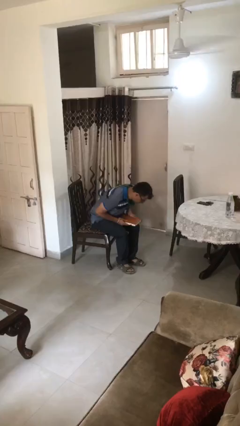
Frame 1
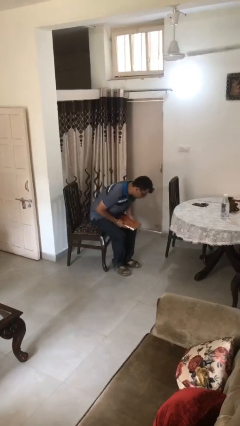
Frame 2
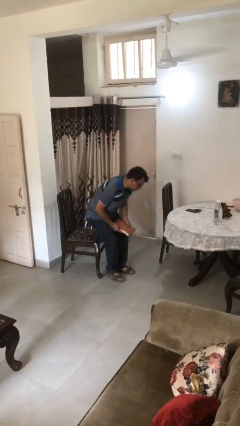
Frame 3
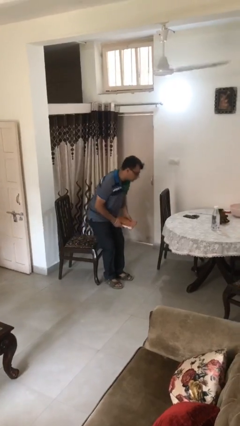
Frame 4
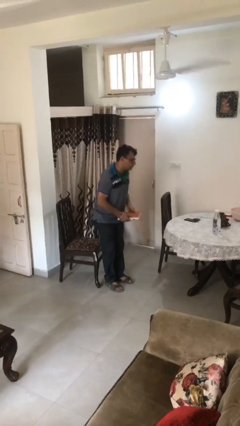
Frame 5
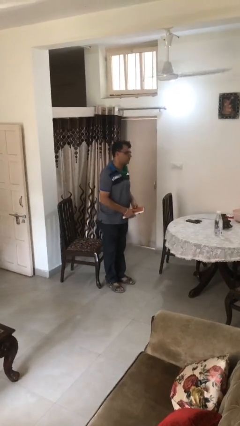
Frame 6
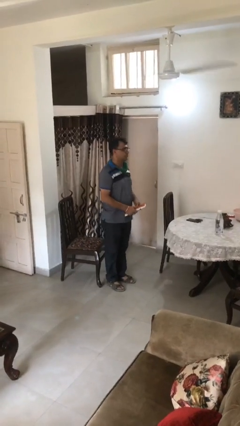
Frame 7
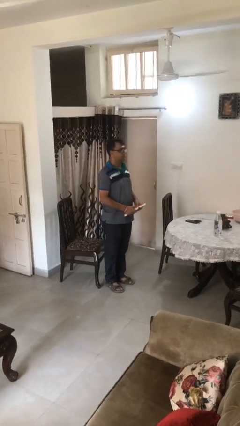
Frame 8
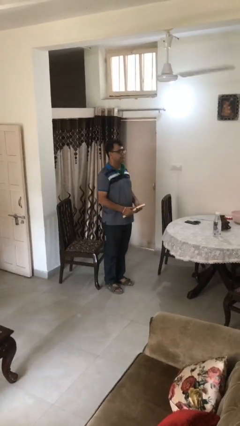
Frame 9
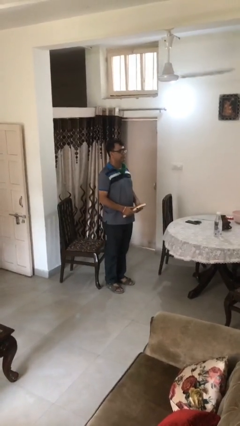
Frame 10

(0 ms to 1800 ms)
person stands up

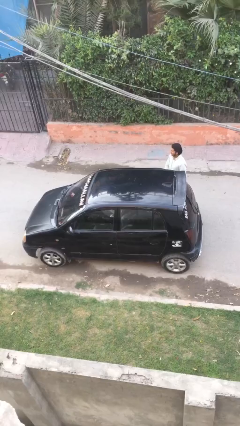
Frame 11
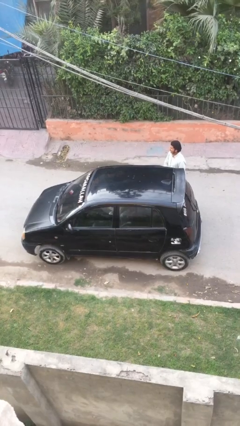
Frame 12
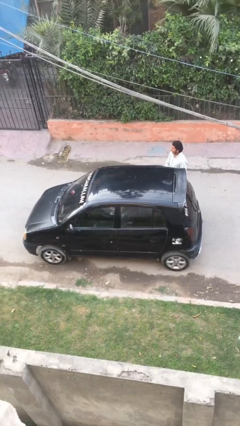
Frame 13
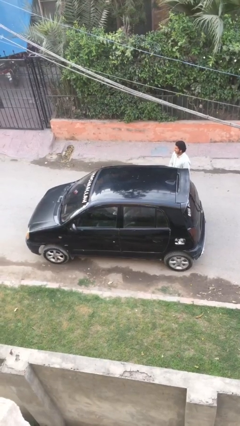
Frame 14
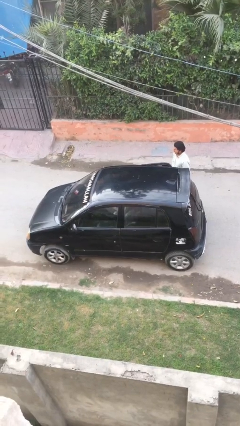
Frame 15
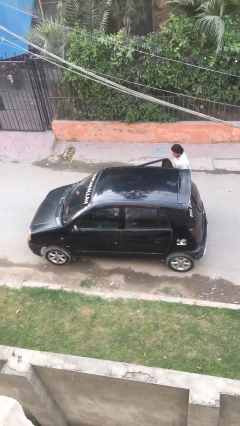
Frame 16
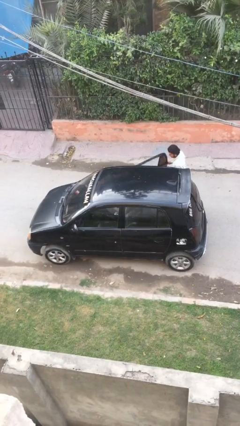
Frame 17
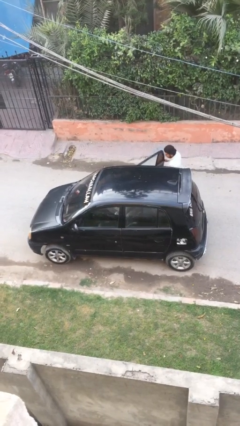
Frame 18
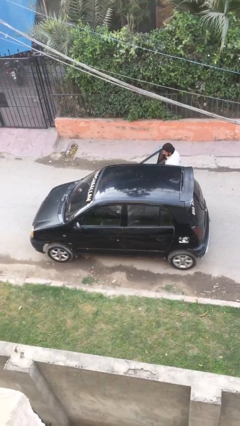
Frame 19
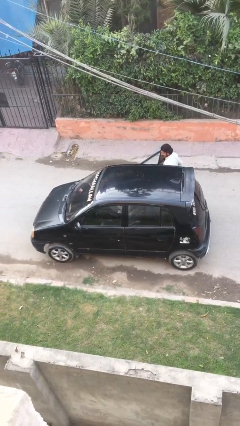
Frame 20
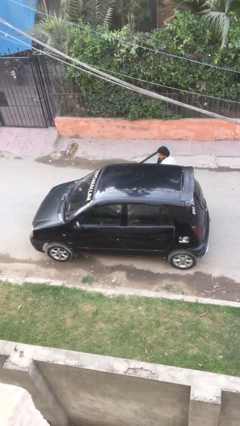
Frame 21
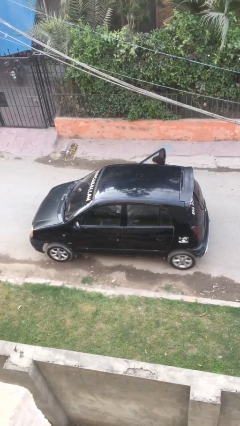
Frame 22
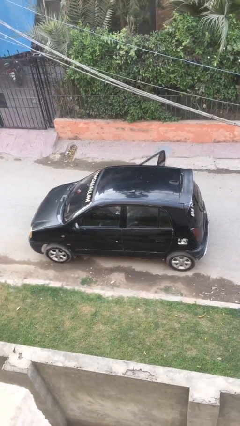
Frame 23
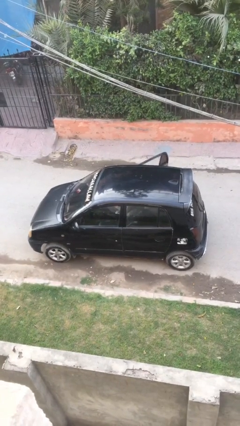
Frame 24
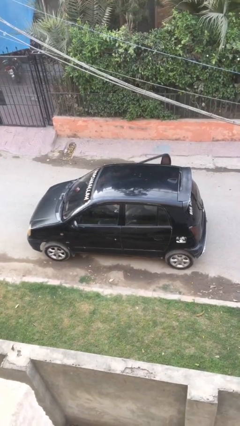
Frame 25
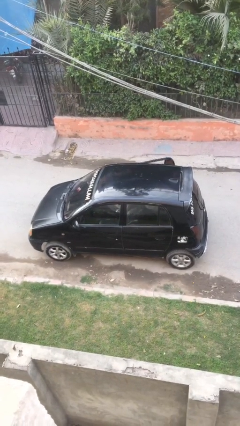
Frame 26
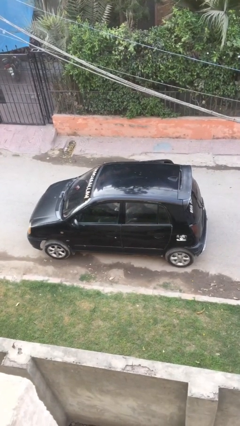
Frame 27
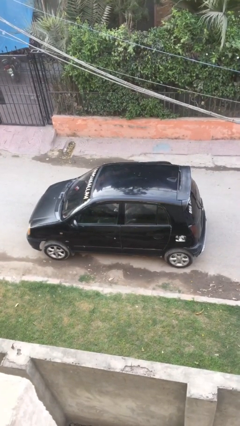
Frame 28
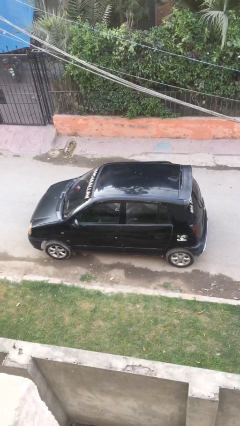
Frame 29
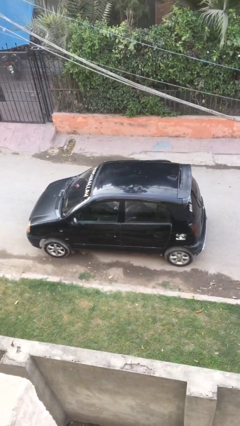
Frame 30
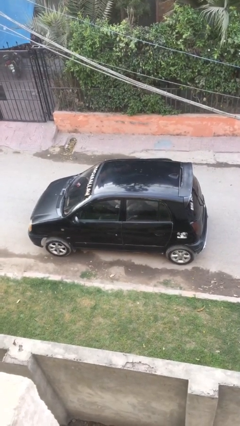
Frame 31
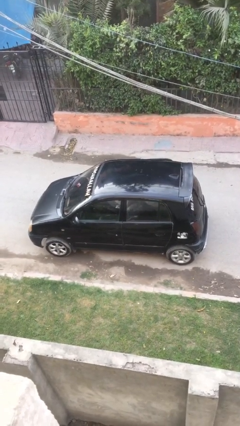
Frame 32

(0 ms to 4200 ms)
car picks up person

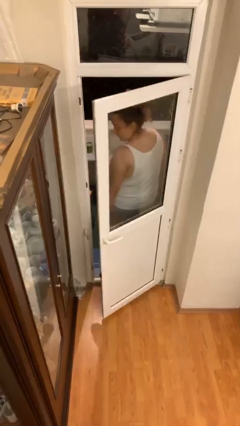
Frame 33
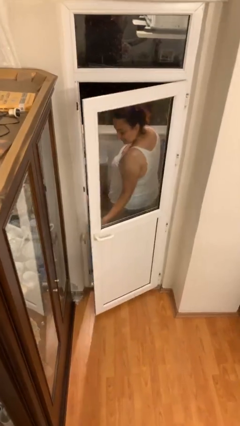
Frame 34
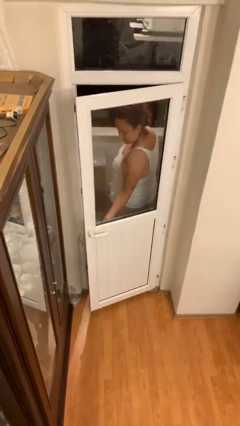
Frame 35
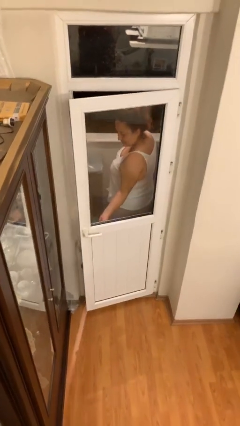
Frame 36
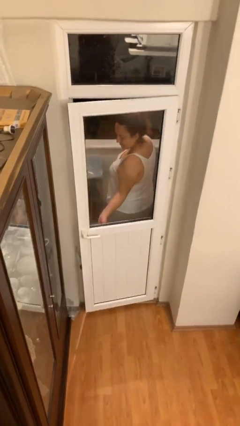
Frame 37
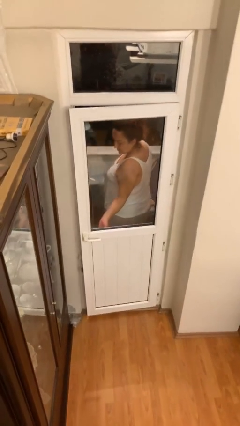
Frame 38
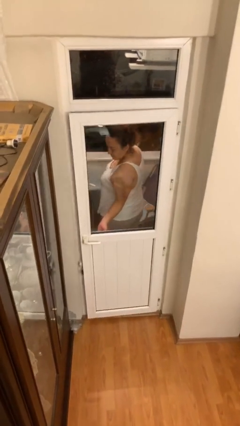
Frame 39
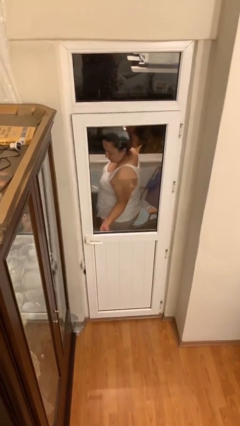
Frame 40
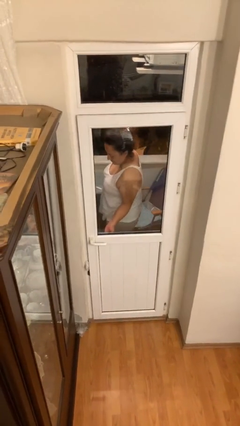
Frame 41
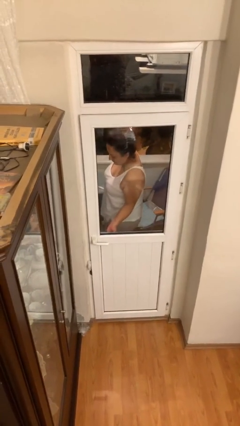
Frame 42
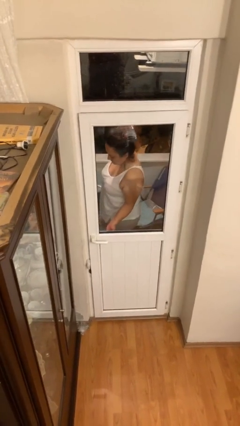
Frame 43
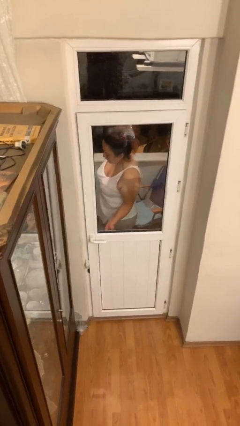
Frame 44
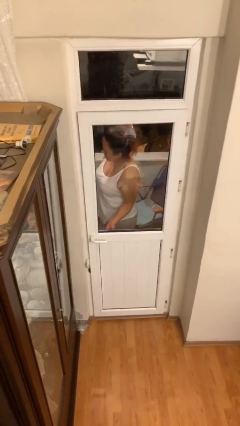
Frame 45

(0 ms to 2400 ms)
person closes facility door

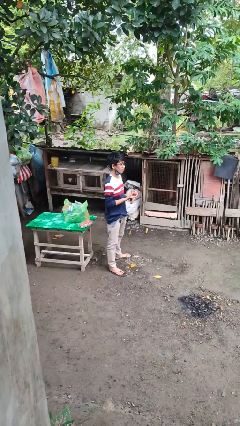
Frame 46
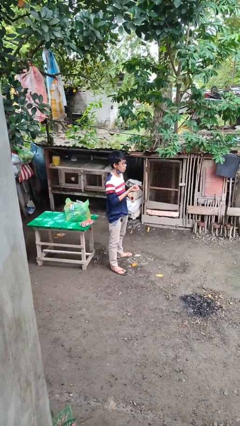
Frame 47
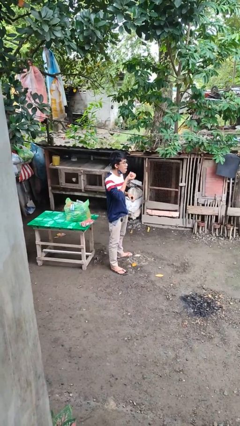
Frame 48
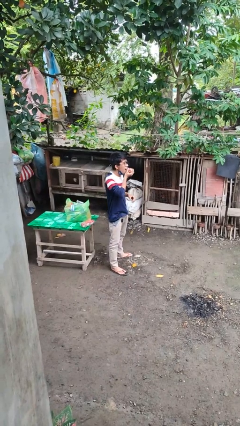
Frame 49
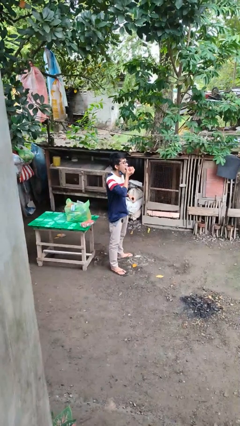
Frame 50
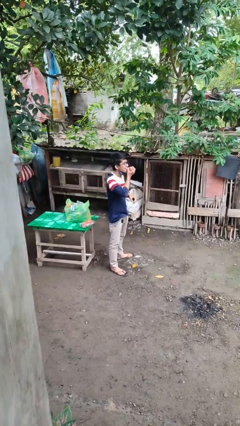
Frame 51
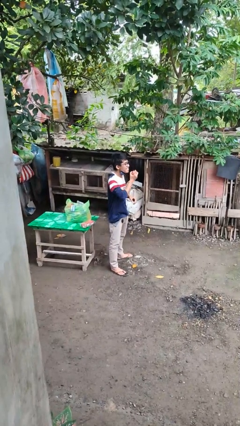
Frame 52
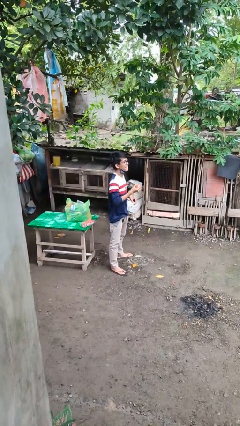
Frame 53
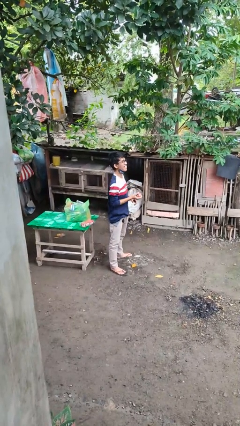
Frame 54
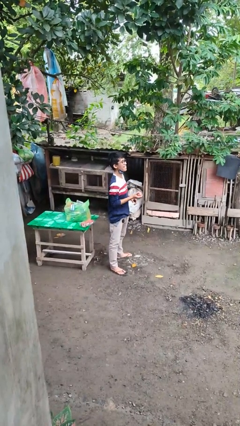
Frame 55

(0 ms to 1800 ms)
person eats apple

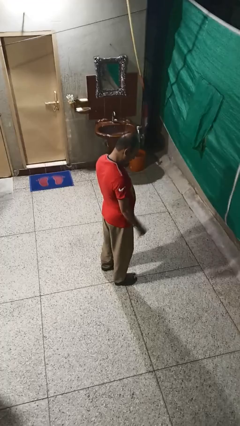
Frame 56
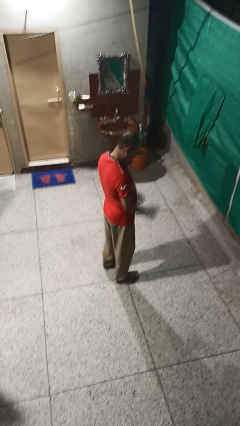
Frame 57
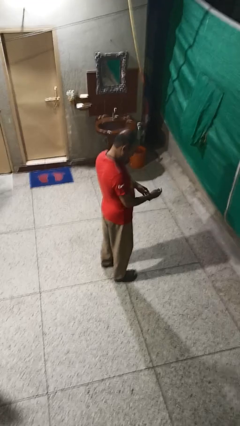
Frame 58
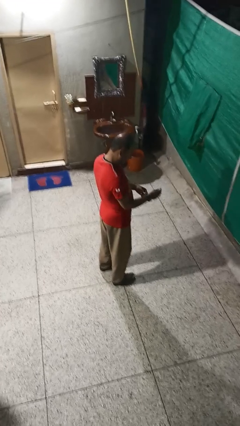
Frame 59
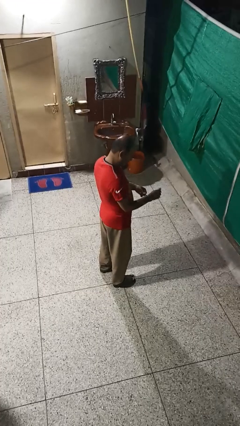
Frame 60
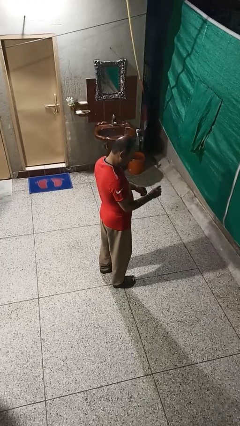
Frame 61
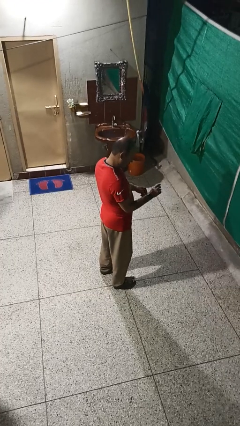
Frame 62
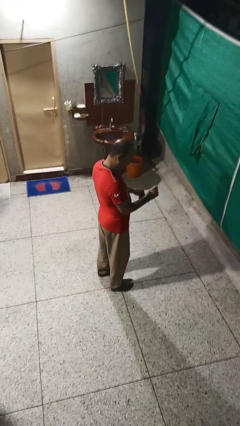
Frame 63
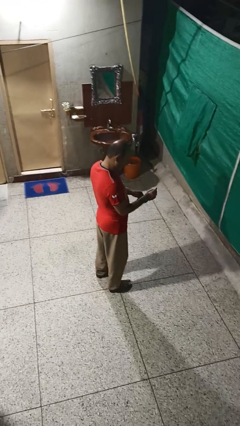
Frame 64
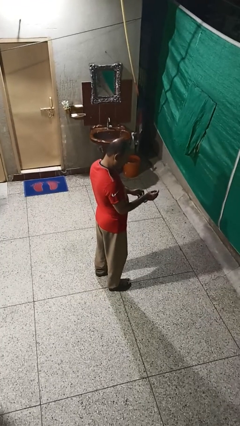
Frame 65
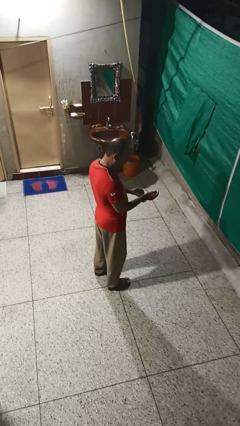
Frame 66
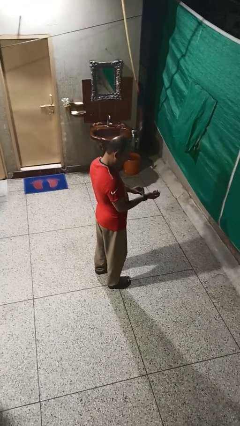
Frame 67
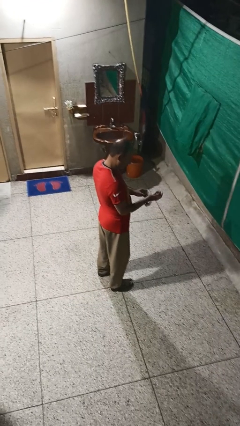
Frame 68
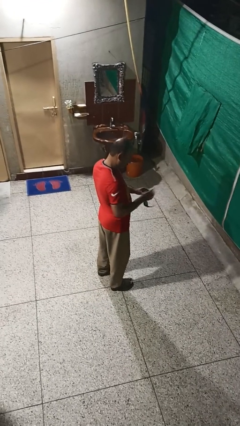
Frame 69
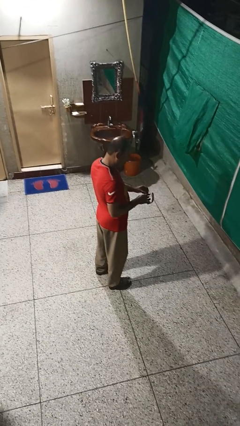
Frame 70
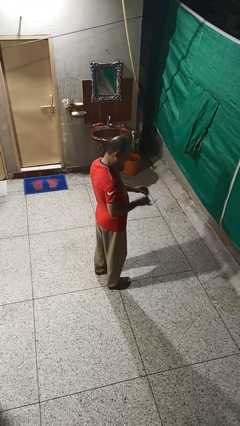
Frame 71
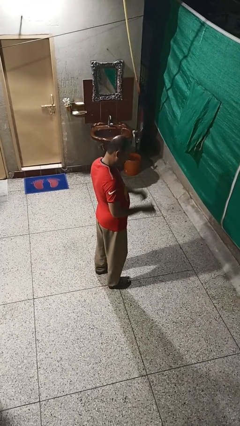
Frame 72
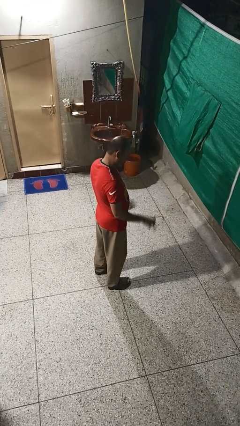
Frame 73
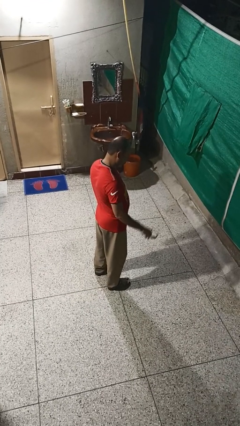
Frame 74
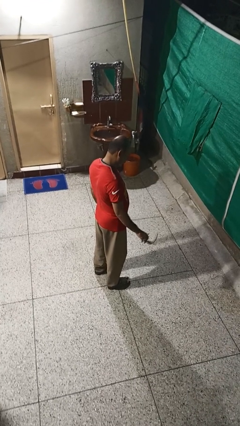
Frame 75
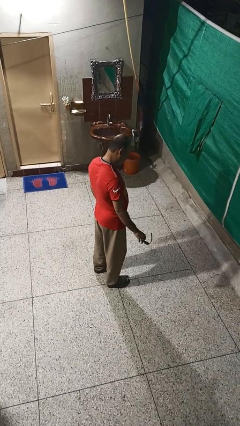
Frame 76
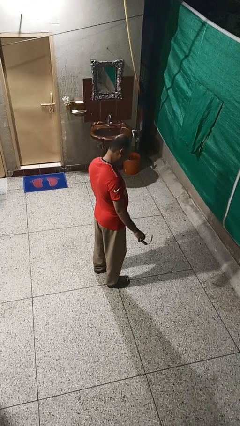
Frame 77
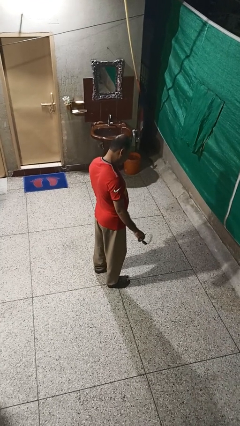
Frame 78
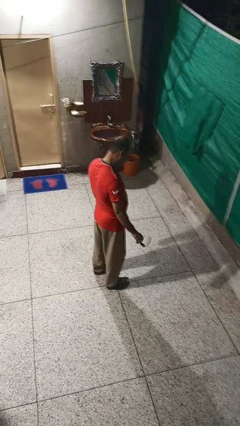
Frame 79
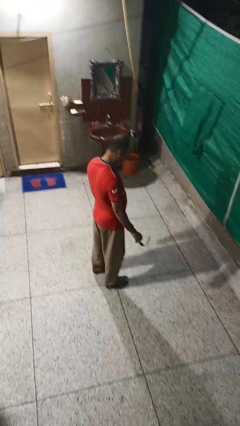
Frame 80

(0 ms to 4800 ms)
person takes off wristwatch

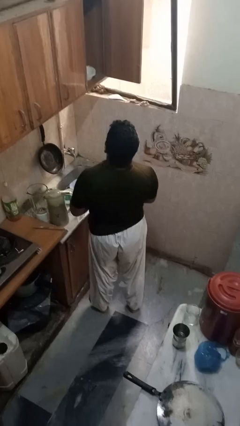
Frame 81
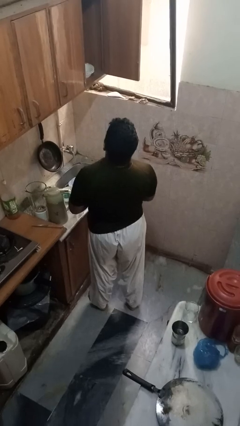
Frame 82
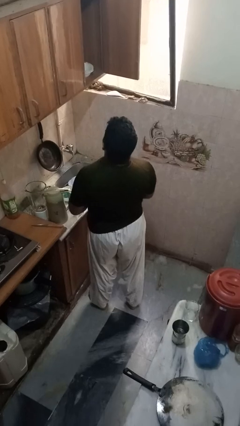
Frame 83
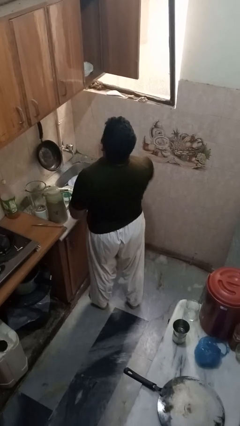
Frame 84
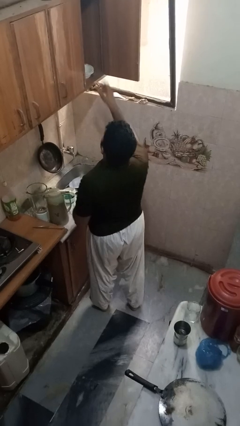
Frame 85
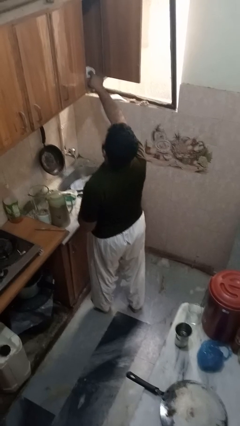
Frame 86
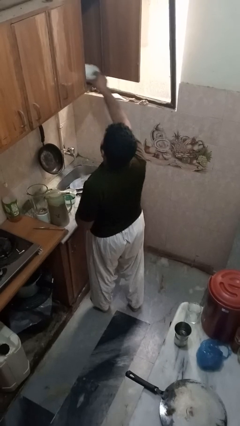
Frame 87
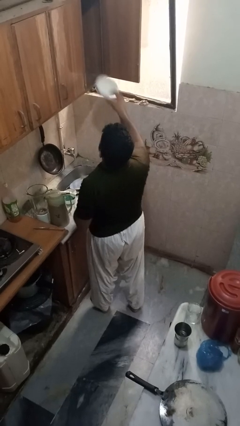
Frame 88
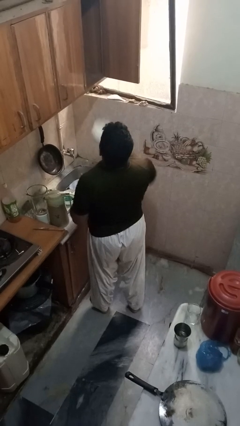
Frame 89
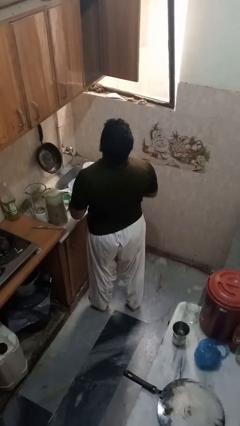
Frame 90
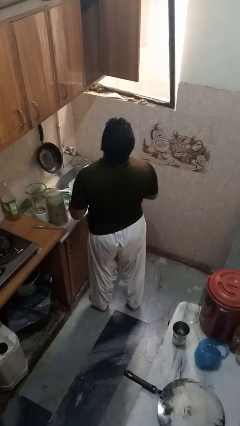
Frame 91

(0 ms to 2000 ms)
person takes object from cabinet

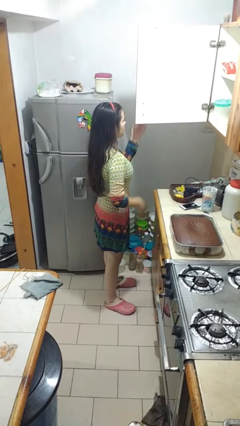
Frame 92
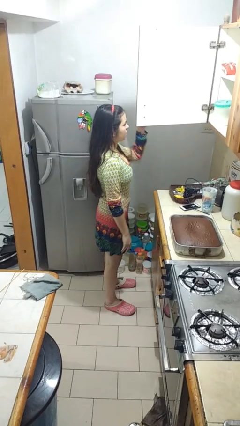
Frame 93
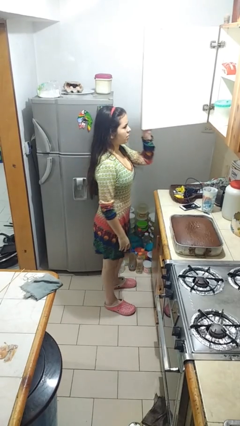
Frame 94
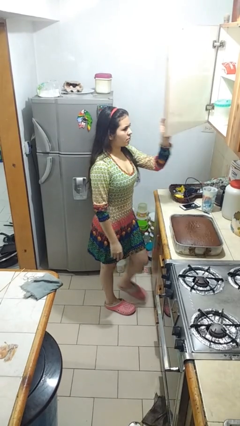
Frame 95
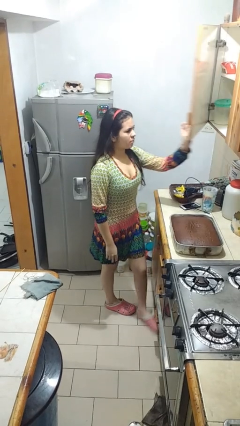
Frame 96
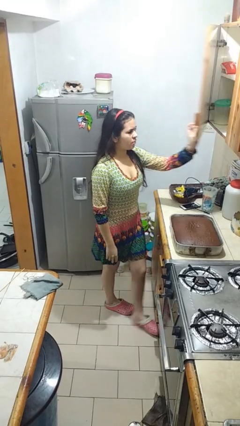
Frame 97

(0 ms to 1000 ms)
person closes cabinet
